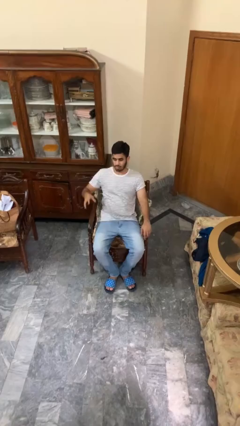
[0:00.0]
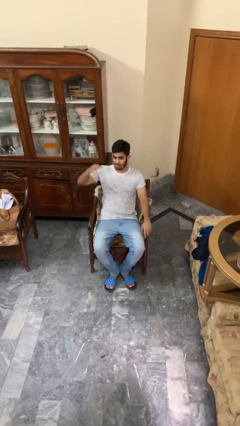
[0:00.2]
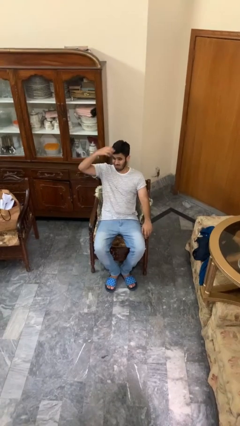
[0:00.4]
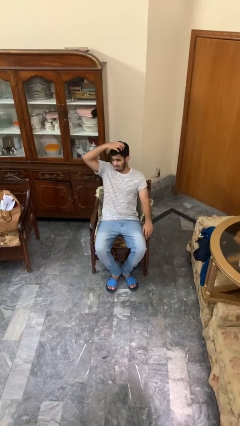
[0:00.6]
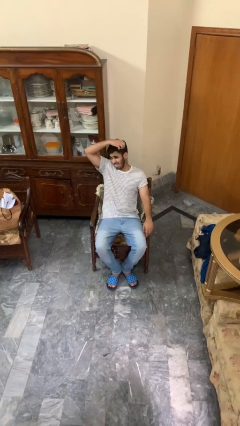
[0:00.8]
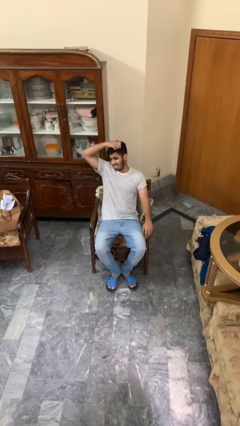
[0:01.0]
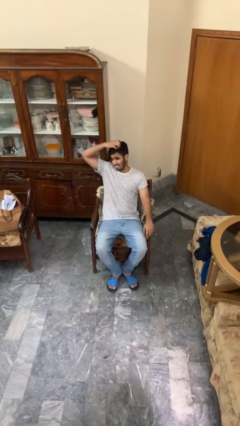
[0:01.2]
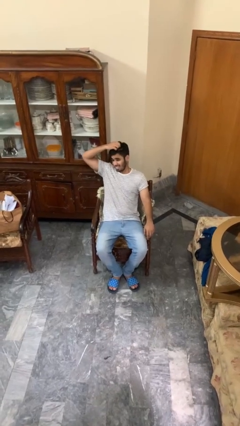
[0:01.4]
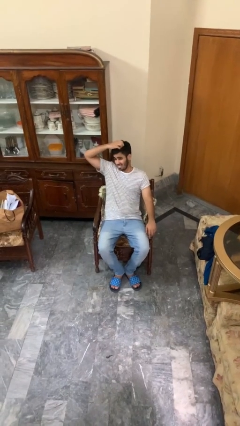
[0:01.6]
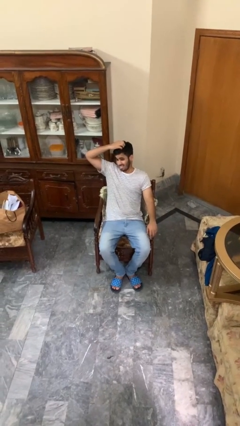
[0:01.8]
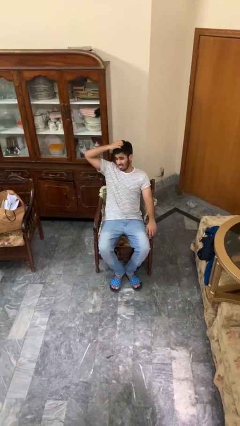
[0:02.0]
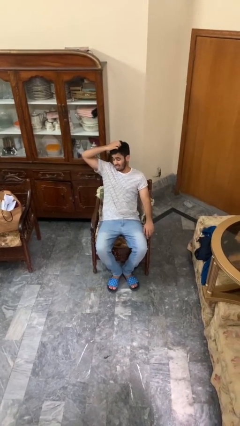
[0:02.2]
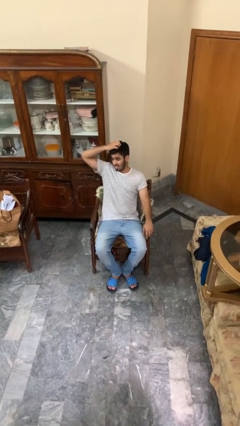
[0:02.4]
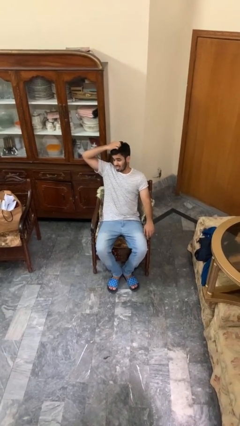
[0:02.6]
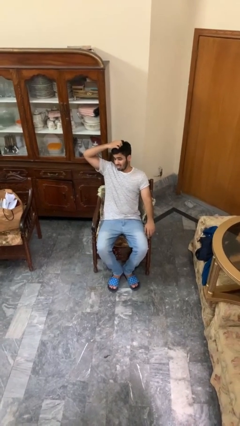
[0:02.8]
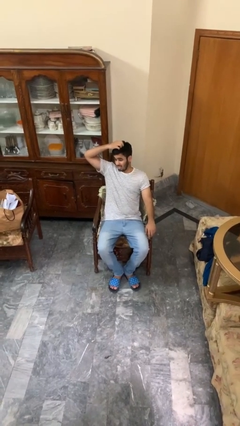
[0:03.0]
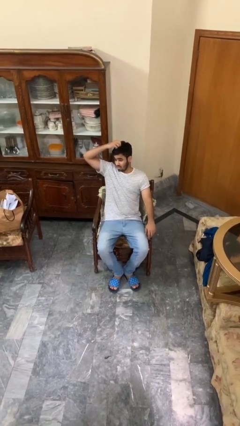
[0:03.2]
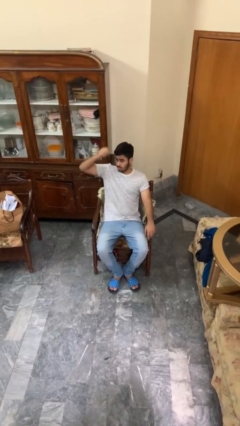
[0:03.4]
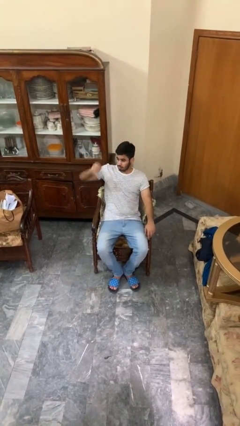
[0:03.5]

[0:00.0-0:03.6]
person strokes hair

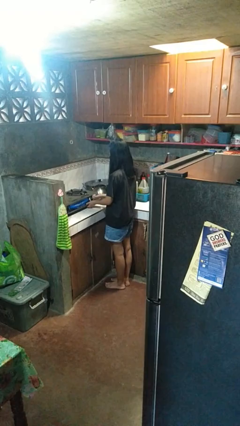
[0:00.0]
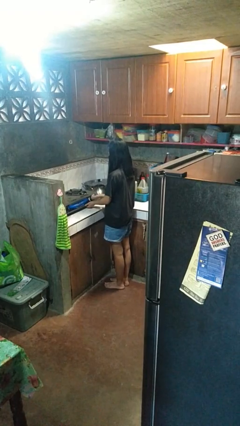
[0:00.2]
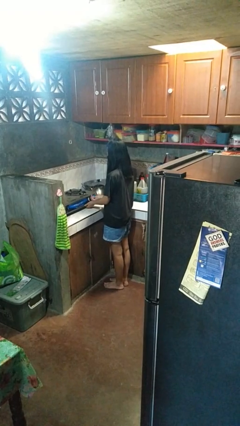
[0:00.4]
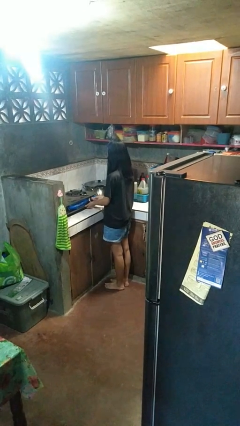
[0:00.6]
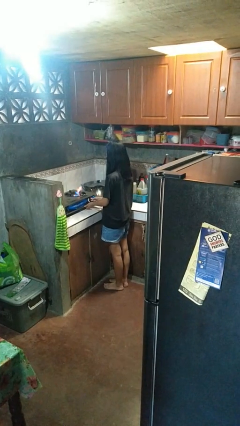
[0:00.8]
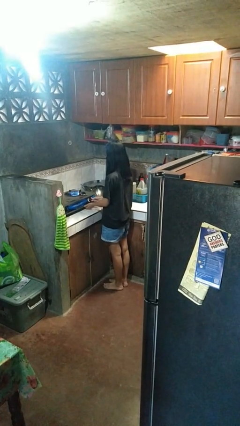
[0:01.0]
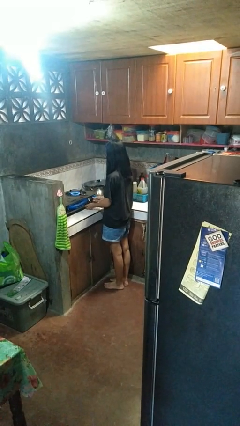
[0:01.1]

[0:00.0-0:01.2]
person turns on stovetop

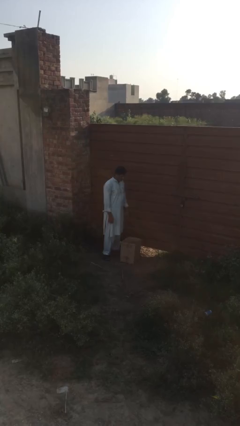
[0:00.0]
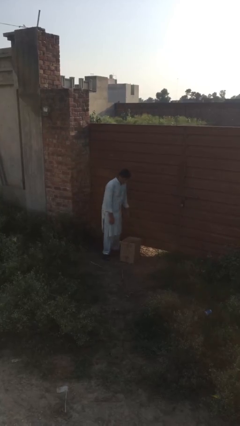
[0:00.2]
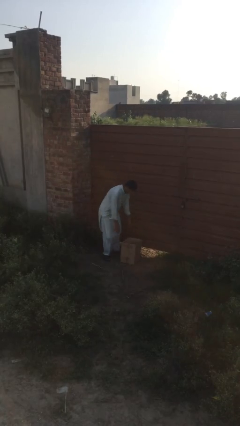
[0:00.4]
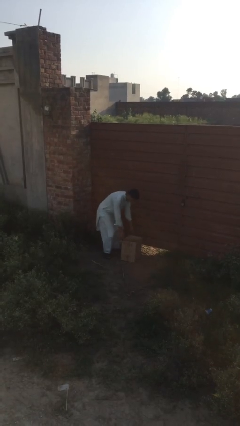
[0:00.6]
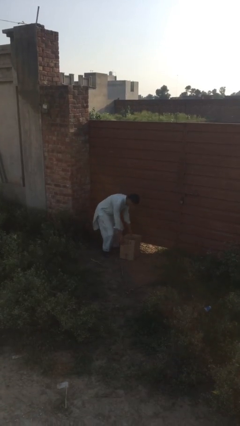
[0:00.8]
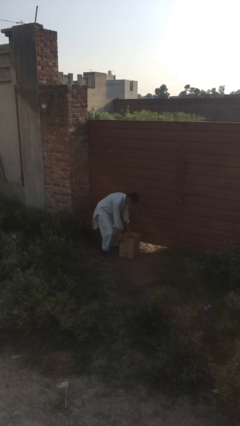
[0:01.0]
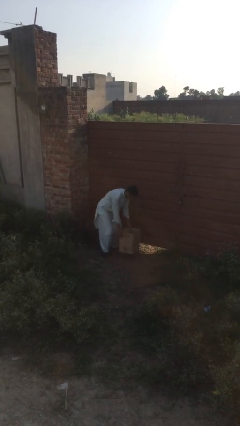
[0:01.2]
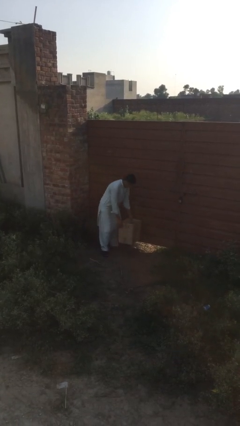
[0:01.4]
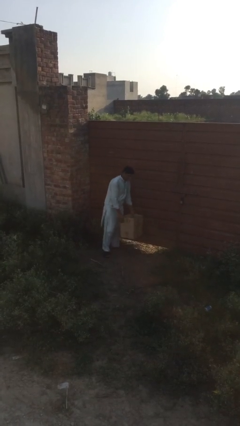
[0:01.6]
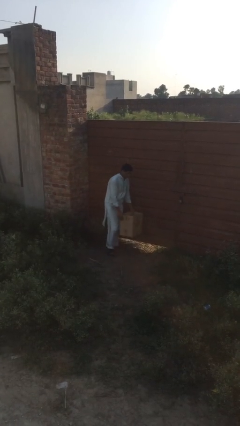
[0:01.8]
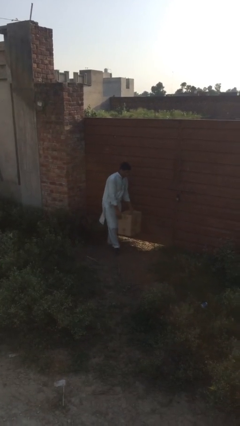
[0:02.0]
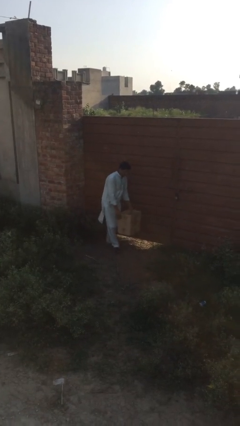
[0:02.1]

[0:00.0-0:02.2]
person picks up object from floor

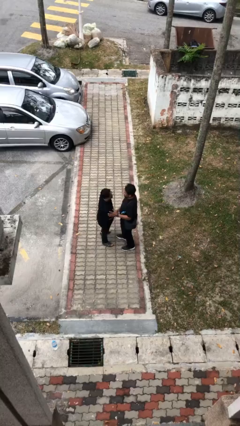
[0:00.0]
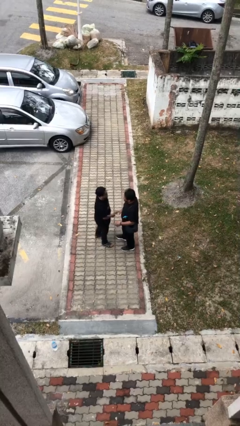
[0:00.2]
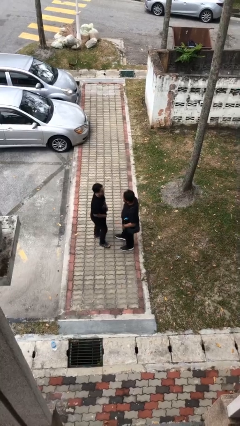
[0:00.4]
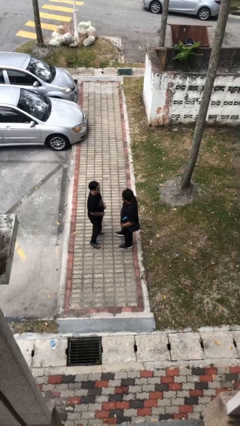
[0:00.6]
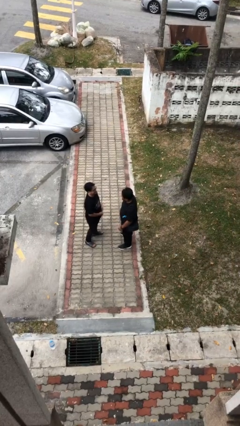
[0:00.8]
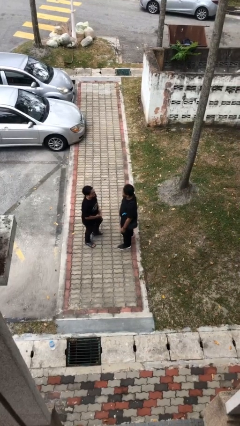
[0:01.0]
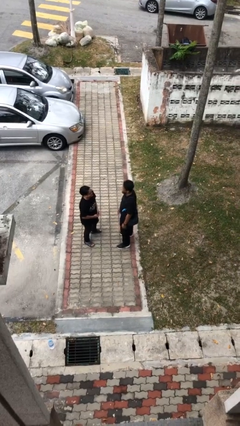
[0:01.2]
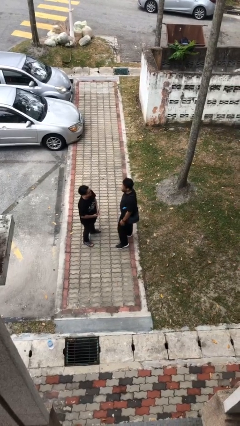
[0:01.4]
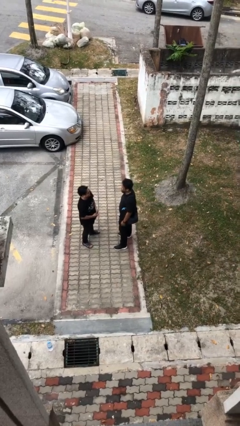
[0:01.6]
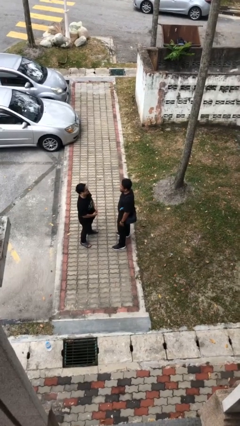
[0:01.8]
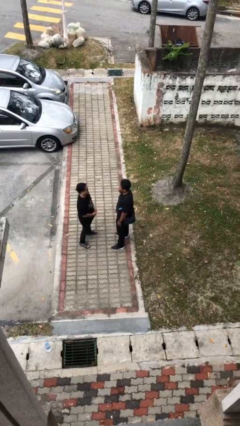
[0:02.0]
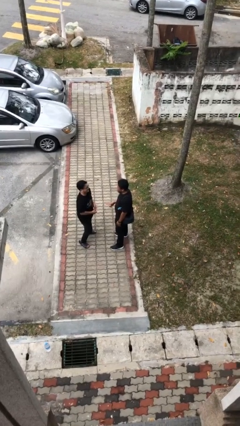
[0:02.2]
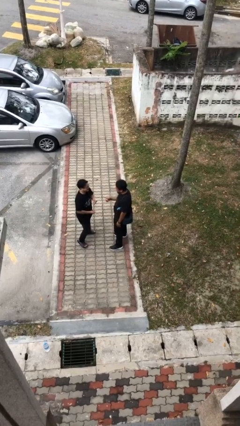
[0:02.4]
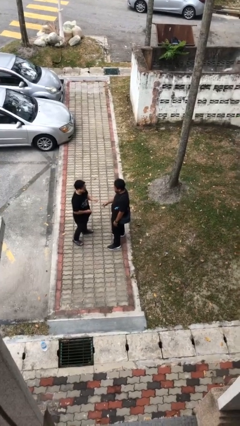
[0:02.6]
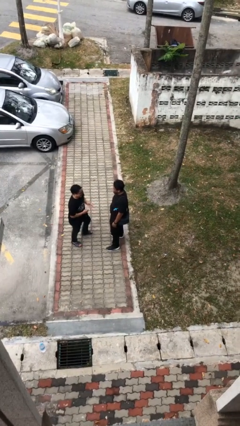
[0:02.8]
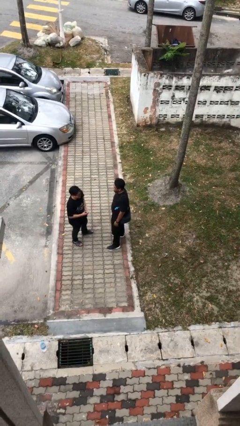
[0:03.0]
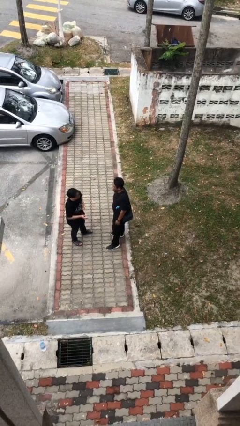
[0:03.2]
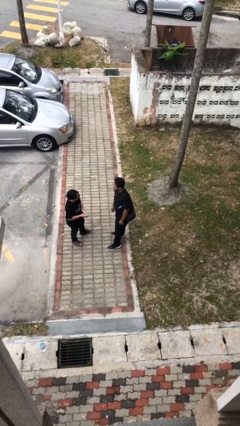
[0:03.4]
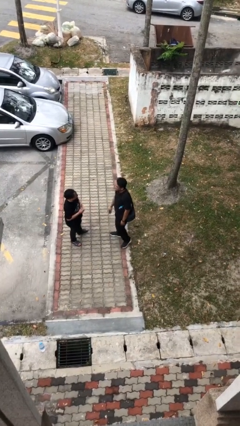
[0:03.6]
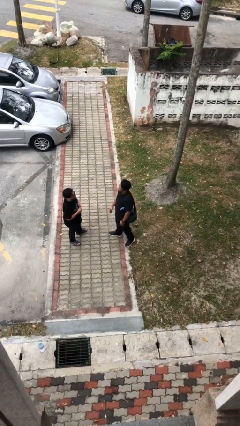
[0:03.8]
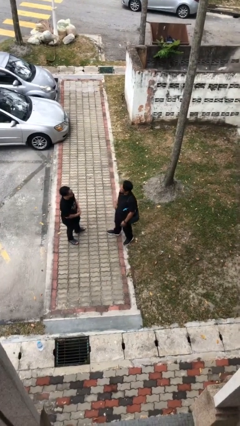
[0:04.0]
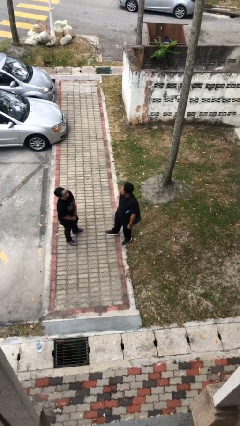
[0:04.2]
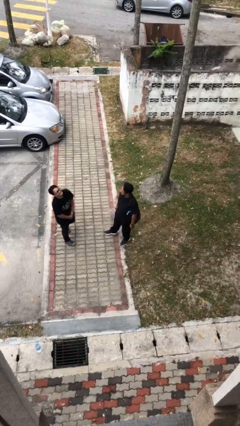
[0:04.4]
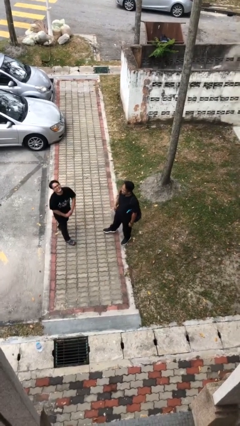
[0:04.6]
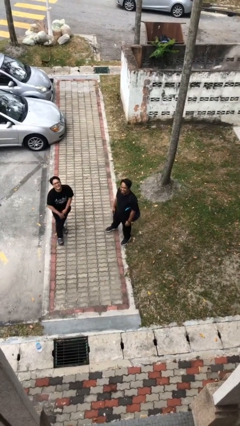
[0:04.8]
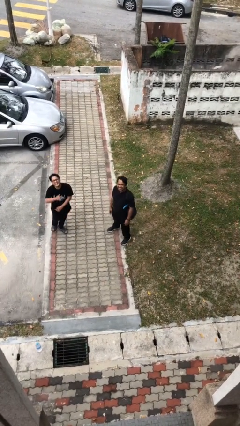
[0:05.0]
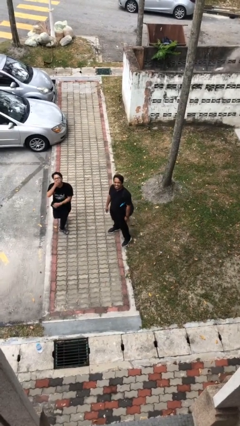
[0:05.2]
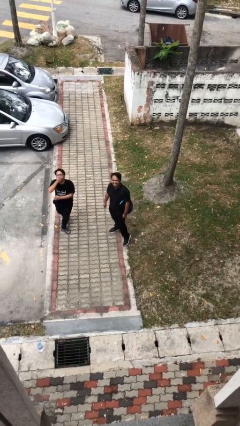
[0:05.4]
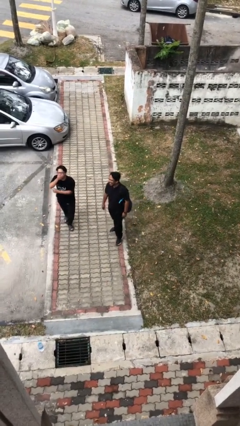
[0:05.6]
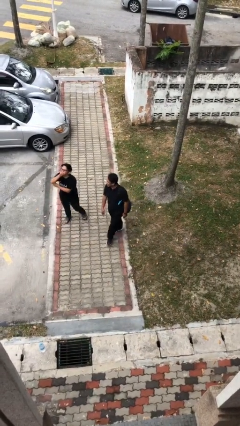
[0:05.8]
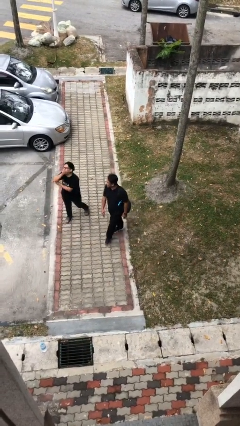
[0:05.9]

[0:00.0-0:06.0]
person talks to person

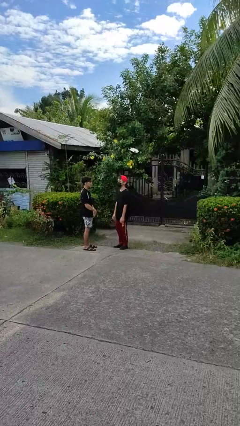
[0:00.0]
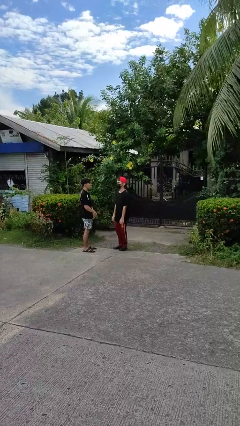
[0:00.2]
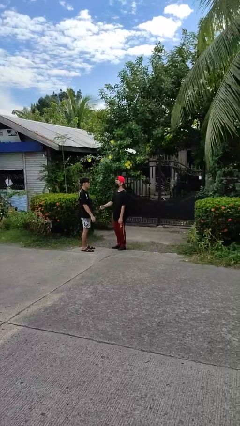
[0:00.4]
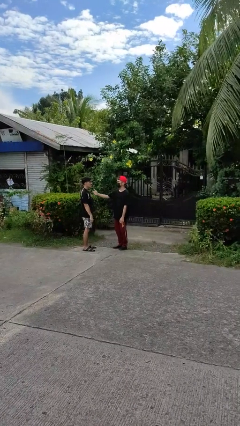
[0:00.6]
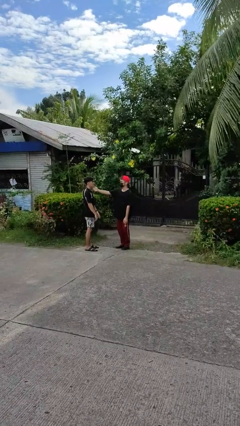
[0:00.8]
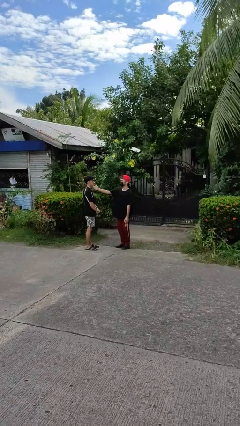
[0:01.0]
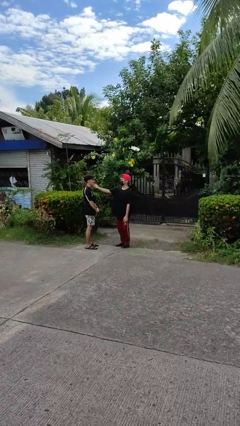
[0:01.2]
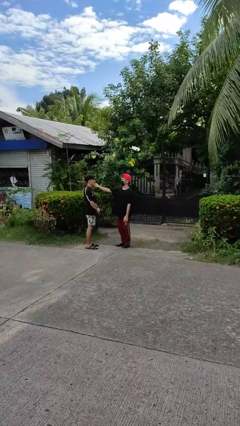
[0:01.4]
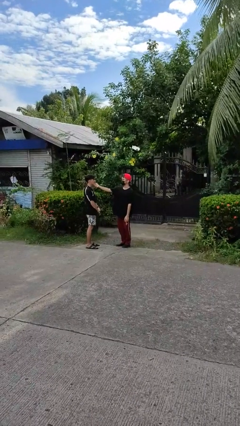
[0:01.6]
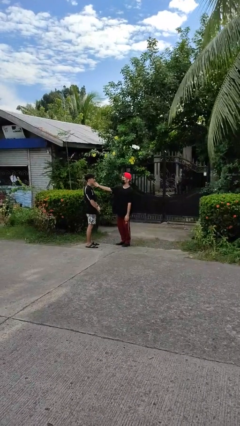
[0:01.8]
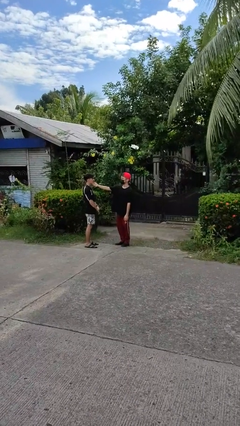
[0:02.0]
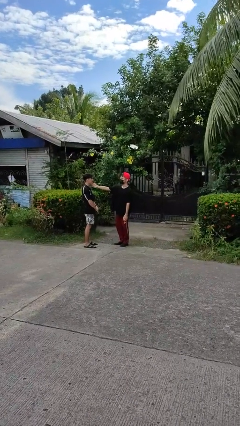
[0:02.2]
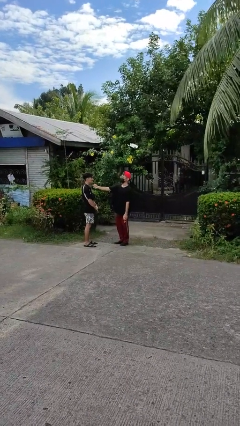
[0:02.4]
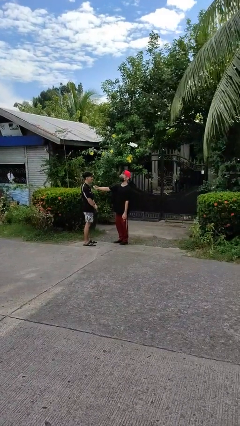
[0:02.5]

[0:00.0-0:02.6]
person touches face of person

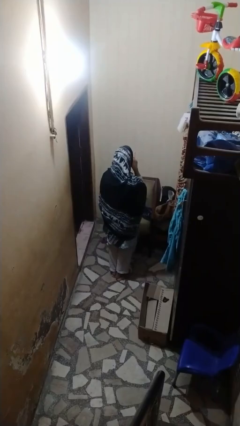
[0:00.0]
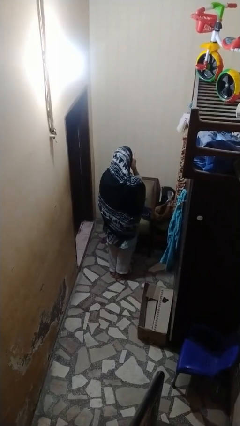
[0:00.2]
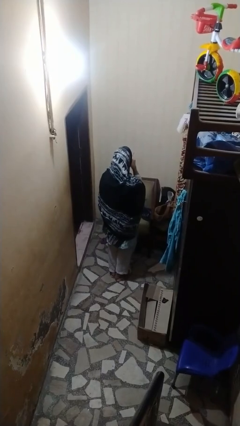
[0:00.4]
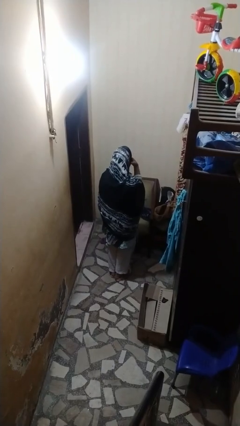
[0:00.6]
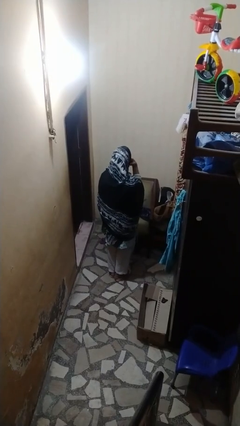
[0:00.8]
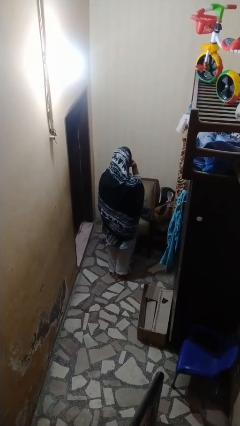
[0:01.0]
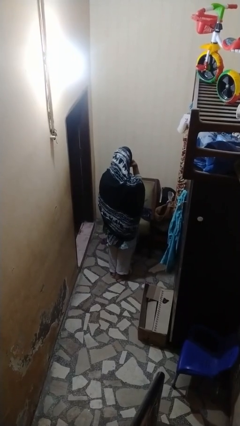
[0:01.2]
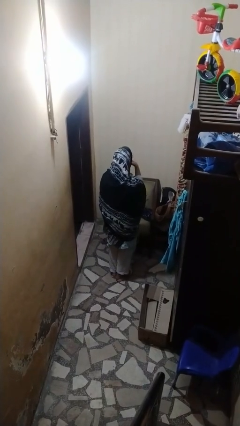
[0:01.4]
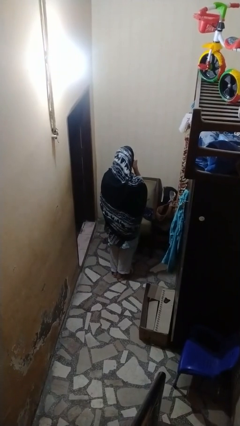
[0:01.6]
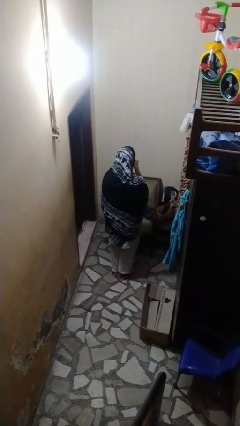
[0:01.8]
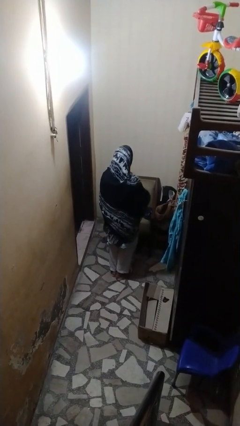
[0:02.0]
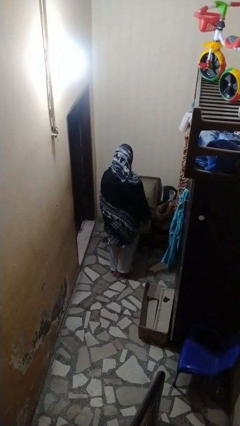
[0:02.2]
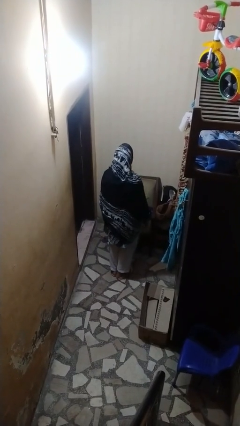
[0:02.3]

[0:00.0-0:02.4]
person gestures watch closely
